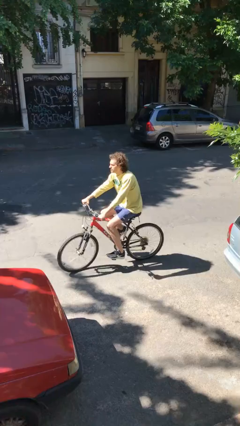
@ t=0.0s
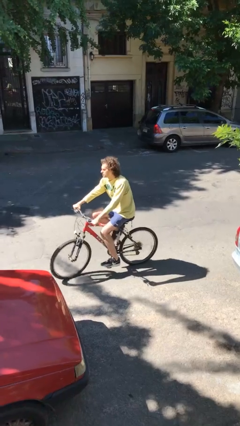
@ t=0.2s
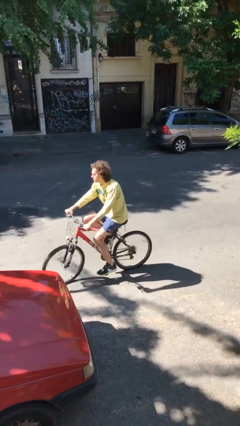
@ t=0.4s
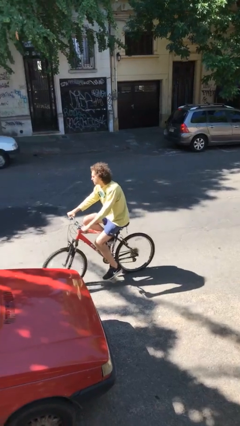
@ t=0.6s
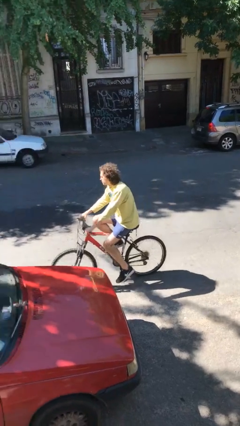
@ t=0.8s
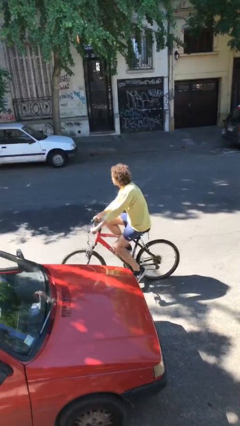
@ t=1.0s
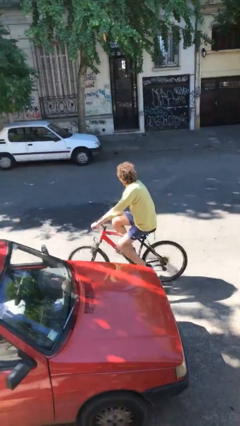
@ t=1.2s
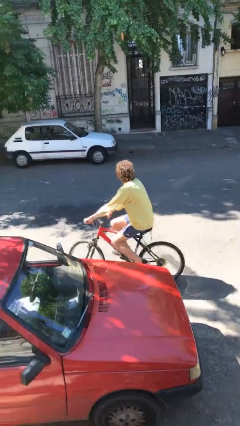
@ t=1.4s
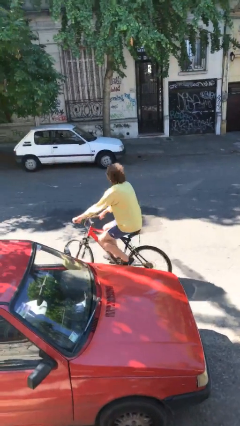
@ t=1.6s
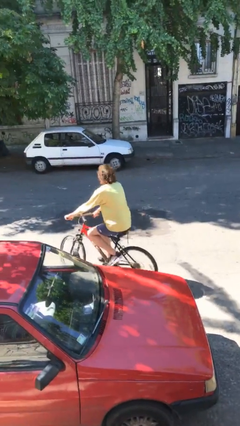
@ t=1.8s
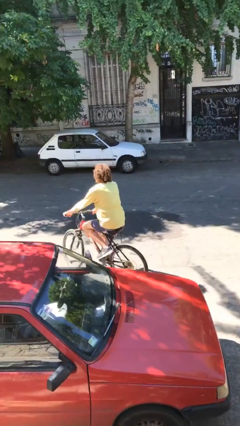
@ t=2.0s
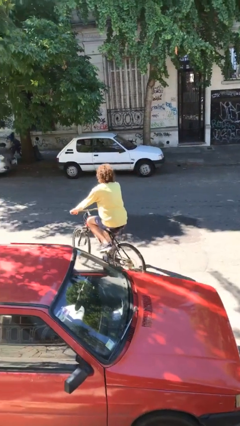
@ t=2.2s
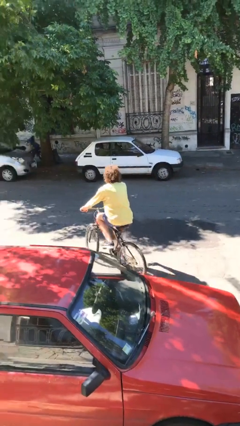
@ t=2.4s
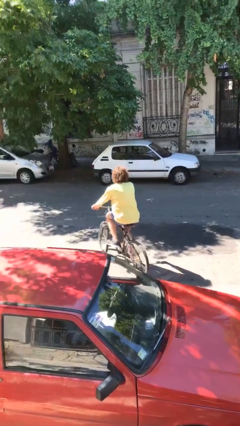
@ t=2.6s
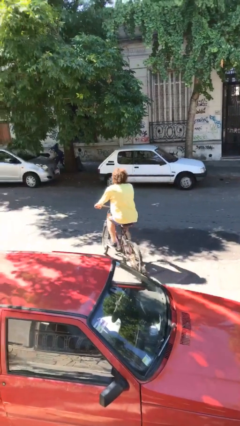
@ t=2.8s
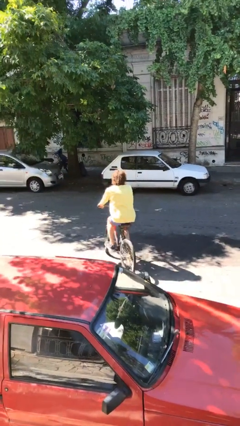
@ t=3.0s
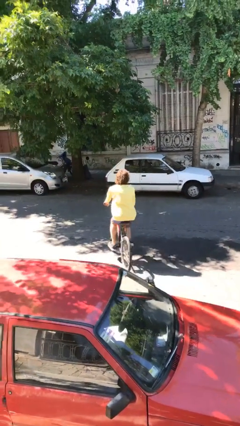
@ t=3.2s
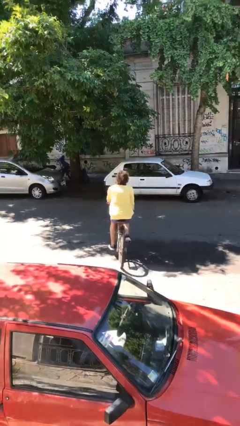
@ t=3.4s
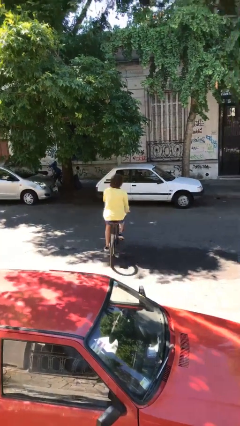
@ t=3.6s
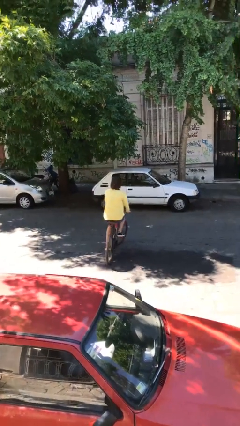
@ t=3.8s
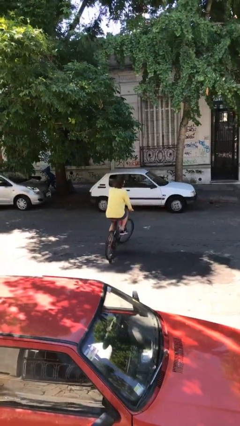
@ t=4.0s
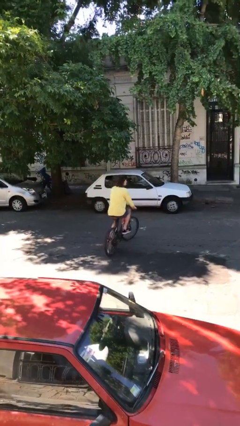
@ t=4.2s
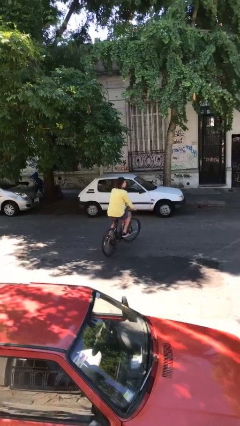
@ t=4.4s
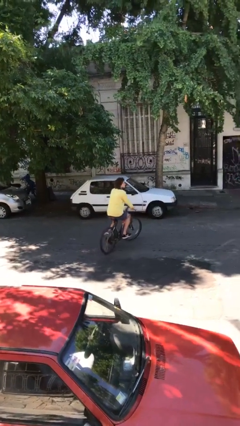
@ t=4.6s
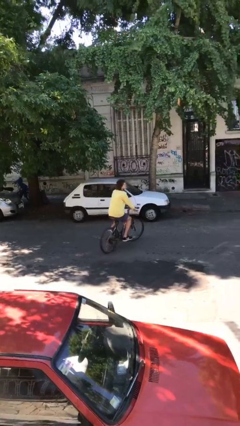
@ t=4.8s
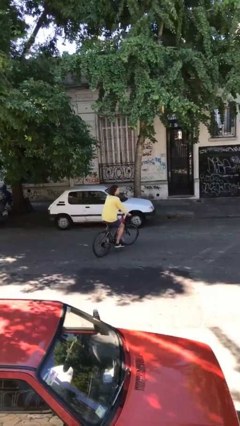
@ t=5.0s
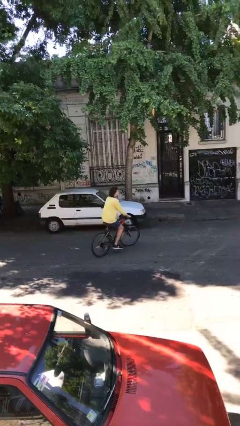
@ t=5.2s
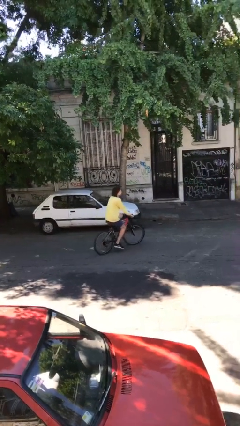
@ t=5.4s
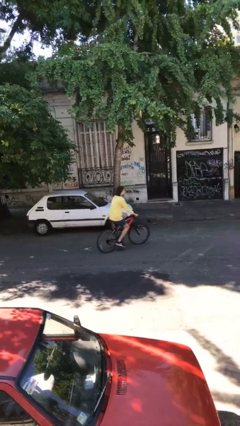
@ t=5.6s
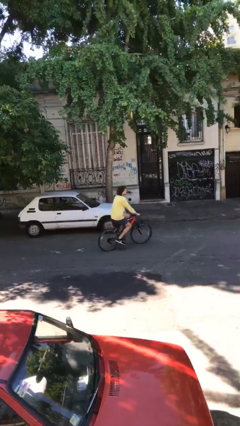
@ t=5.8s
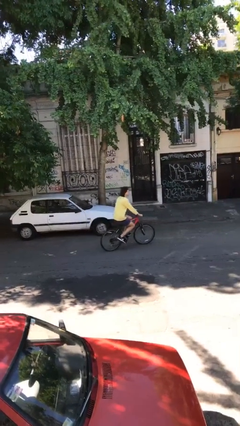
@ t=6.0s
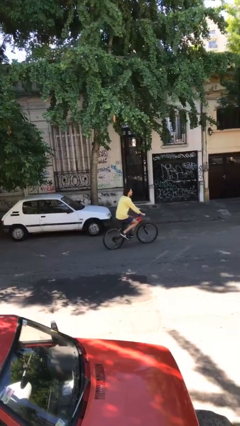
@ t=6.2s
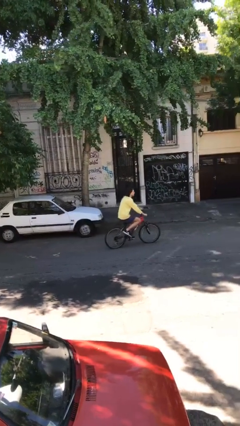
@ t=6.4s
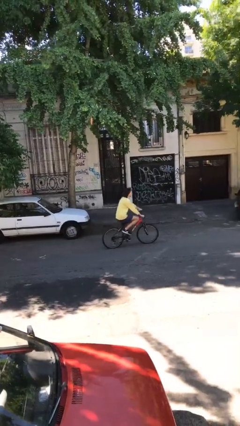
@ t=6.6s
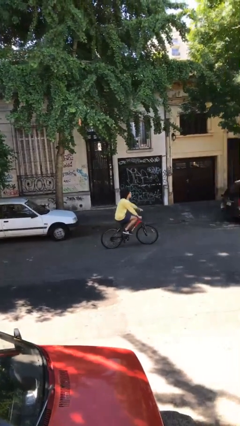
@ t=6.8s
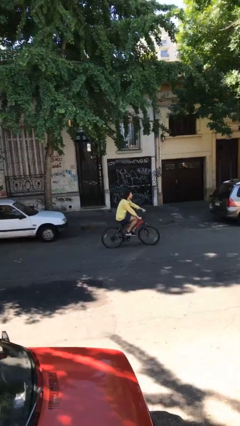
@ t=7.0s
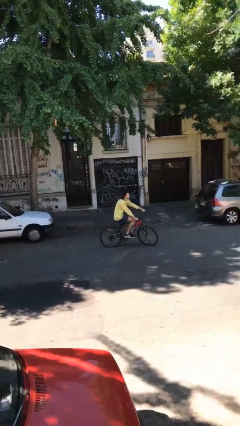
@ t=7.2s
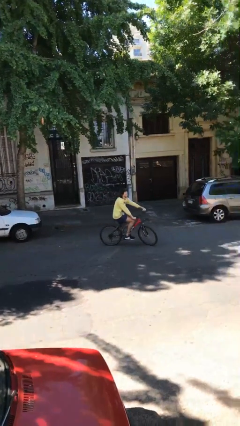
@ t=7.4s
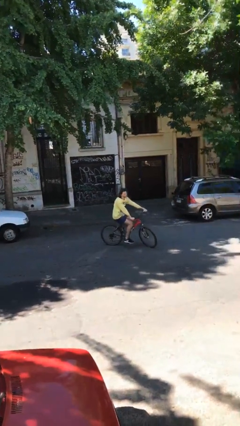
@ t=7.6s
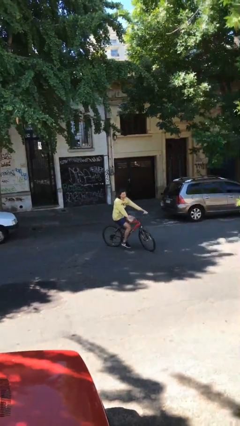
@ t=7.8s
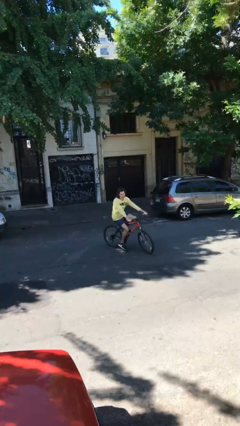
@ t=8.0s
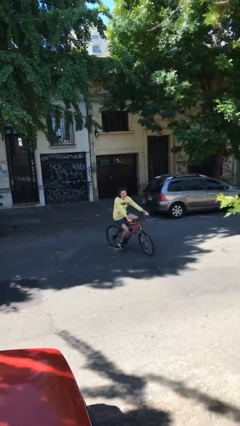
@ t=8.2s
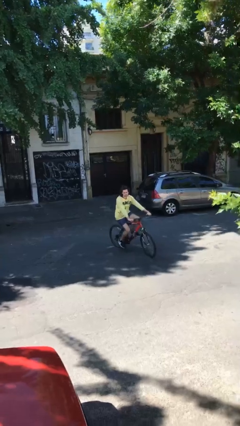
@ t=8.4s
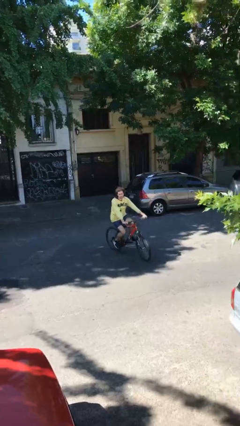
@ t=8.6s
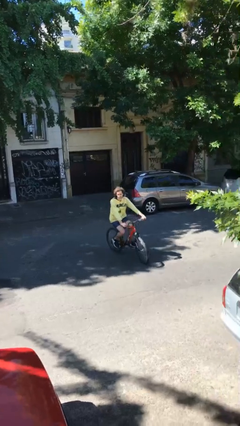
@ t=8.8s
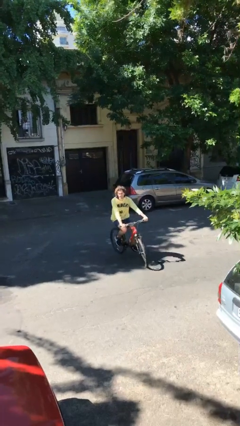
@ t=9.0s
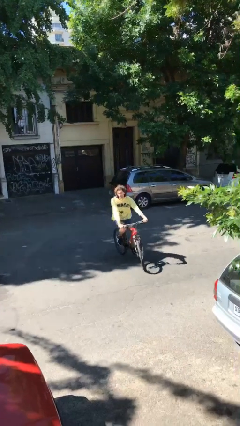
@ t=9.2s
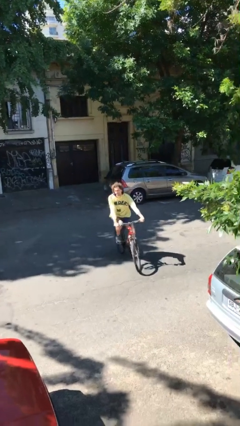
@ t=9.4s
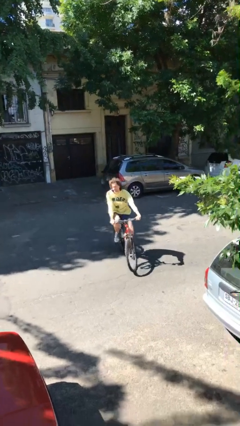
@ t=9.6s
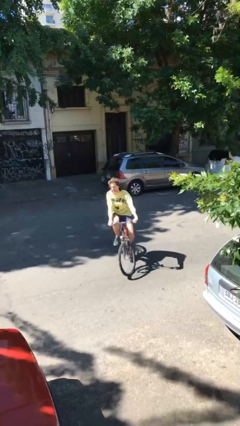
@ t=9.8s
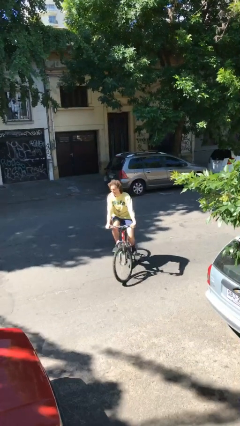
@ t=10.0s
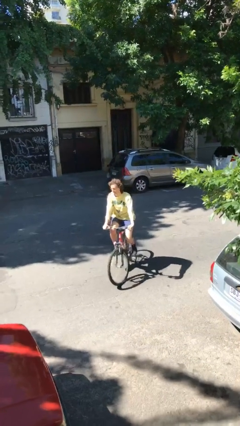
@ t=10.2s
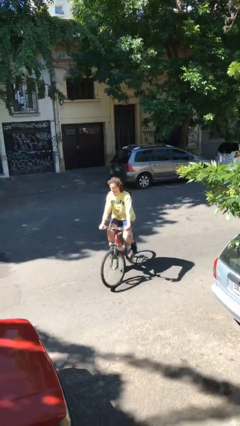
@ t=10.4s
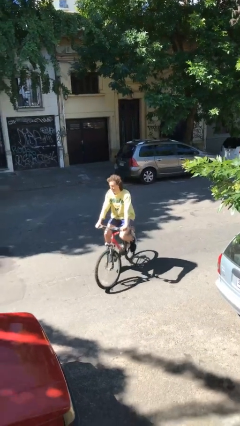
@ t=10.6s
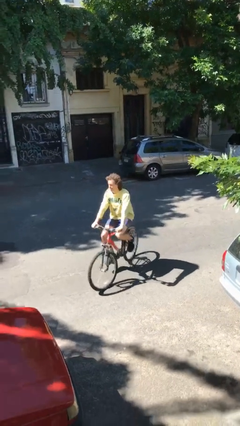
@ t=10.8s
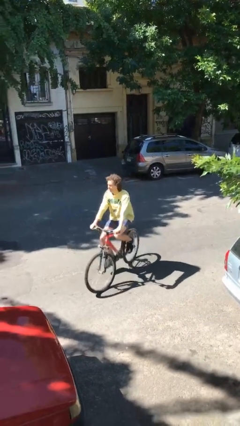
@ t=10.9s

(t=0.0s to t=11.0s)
person rides bicycle

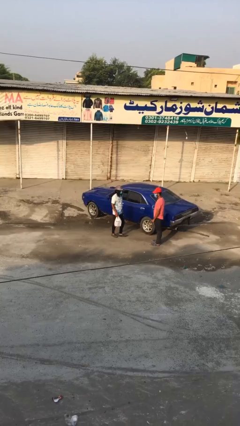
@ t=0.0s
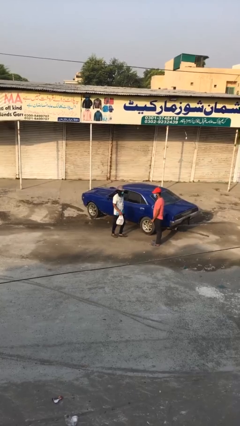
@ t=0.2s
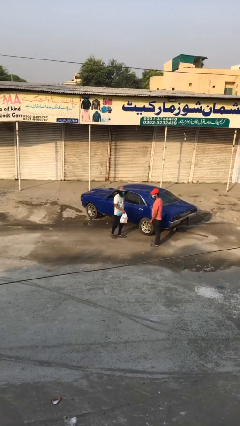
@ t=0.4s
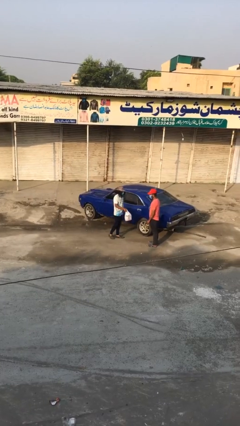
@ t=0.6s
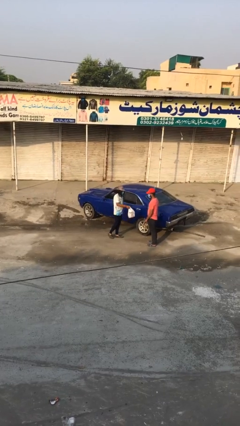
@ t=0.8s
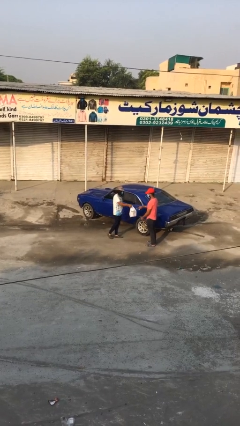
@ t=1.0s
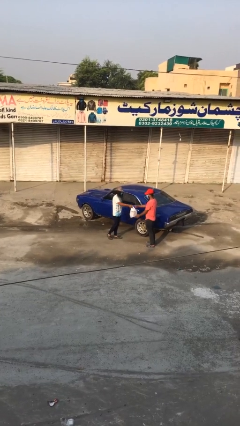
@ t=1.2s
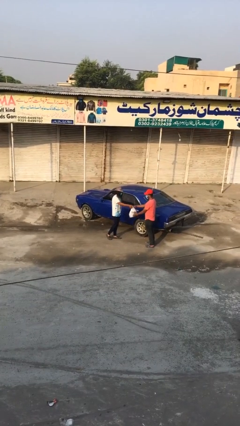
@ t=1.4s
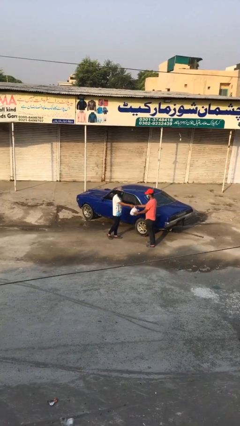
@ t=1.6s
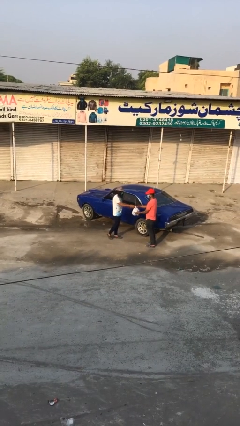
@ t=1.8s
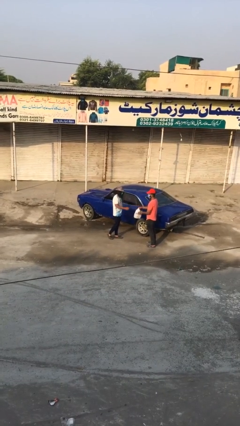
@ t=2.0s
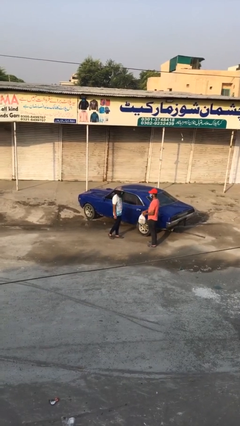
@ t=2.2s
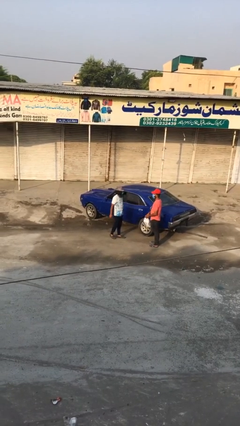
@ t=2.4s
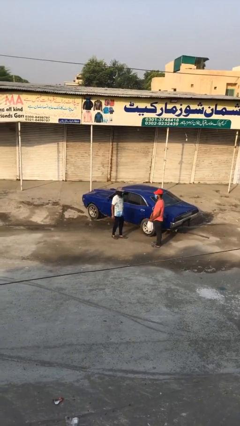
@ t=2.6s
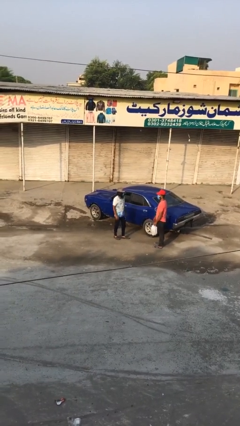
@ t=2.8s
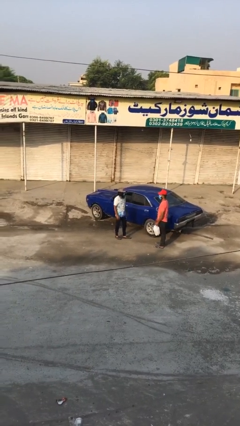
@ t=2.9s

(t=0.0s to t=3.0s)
person transfers object to person

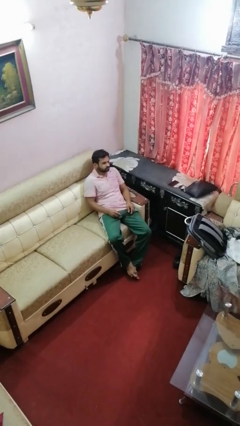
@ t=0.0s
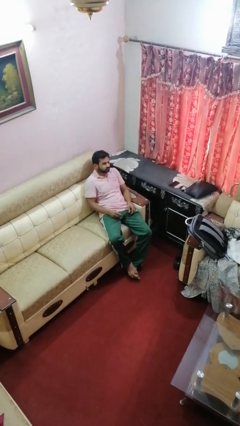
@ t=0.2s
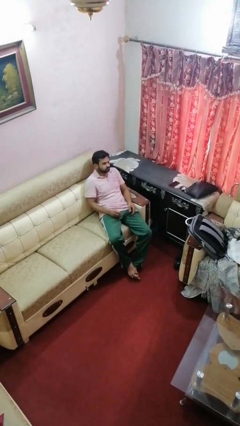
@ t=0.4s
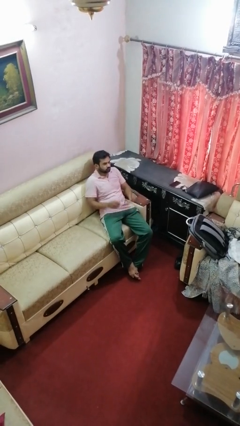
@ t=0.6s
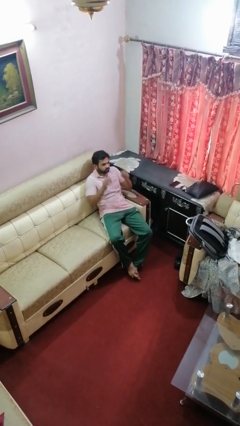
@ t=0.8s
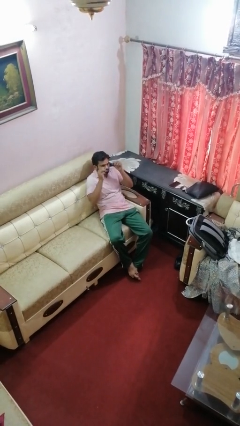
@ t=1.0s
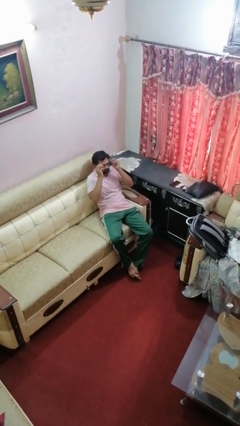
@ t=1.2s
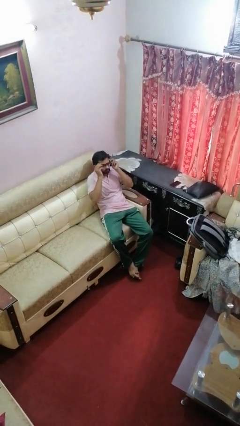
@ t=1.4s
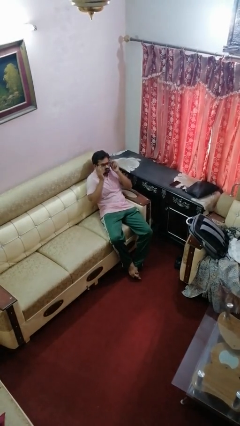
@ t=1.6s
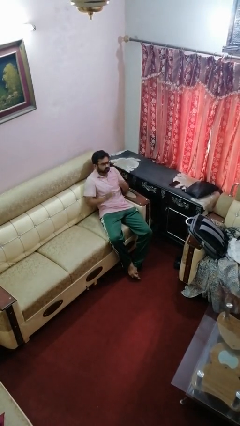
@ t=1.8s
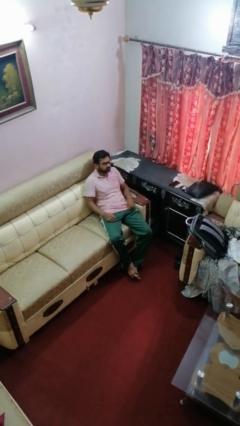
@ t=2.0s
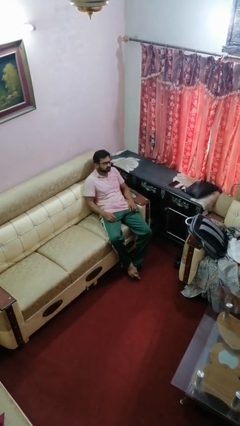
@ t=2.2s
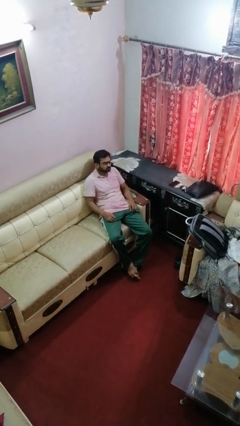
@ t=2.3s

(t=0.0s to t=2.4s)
person puts on glasses

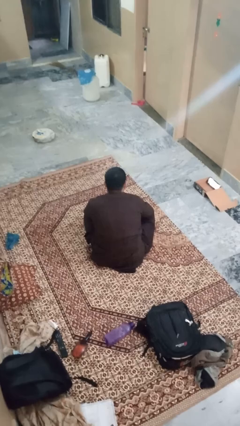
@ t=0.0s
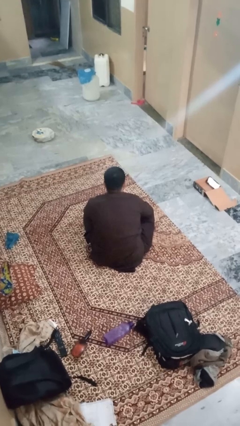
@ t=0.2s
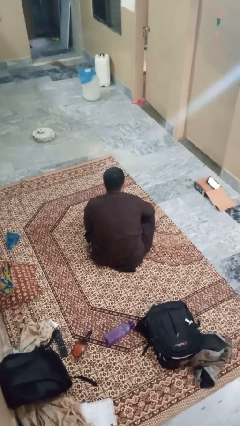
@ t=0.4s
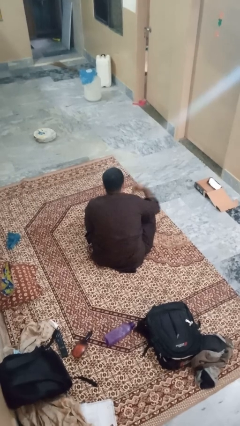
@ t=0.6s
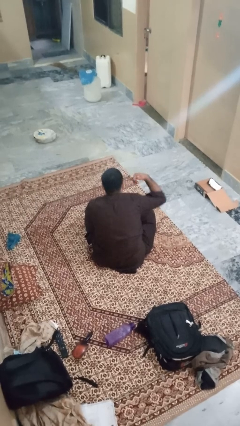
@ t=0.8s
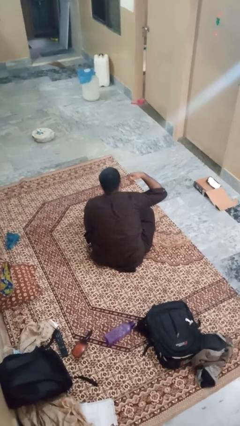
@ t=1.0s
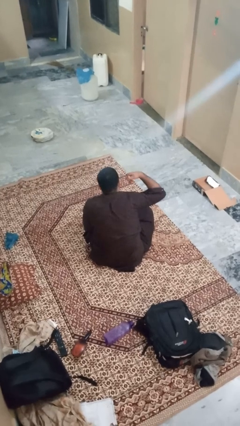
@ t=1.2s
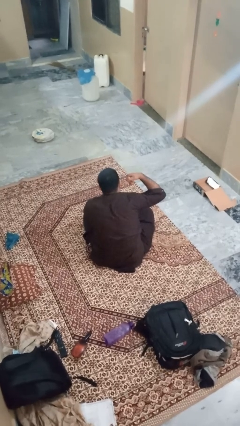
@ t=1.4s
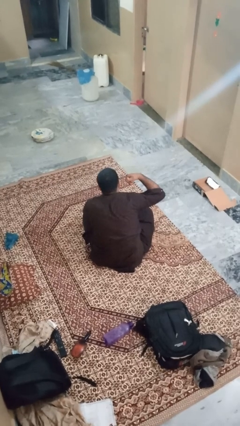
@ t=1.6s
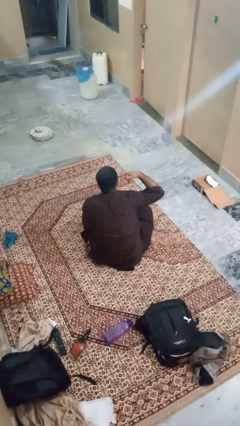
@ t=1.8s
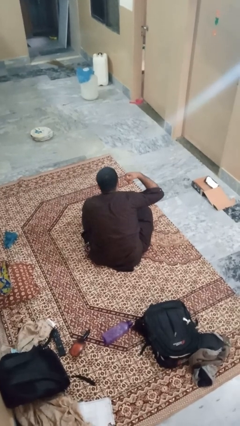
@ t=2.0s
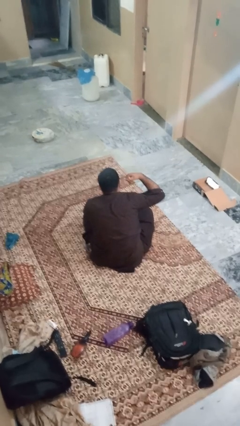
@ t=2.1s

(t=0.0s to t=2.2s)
person gestures call me
